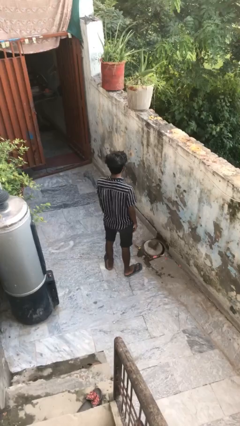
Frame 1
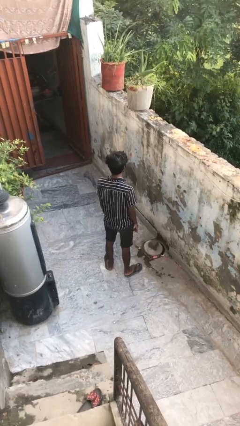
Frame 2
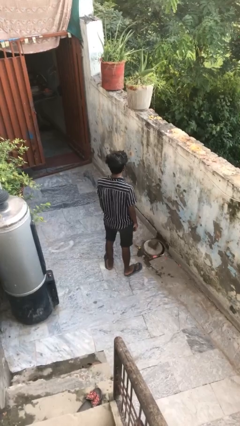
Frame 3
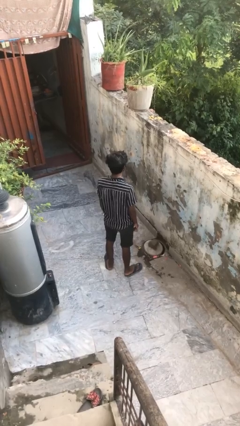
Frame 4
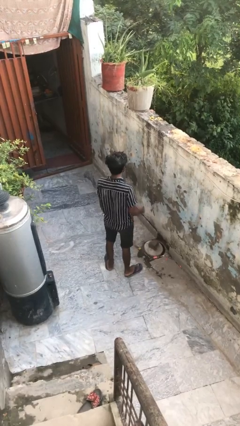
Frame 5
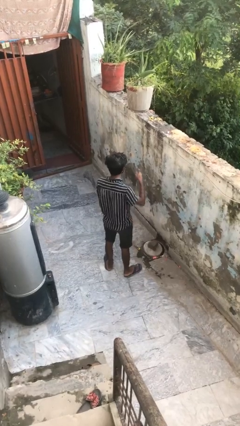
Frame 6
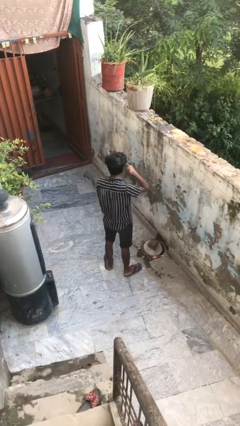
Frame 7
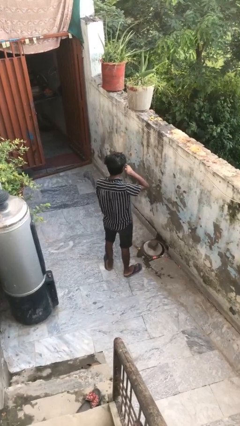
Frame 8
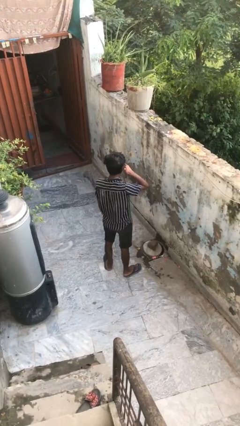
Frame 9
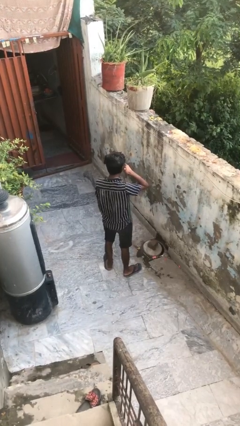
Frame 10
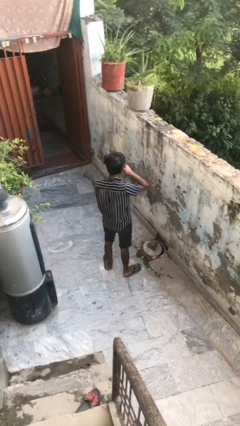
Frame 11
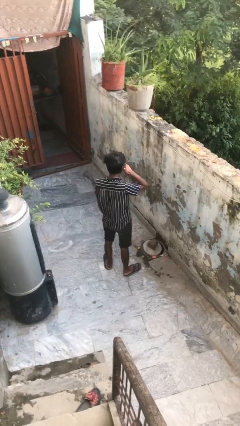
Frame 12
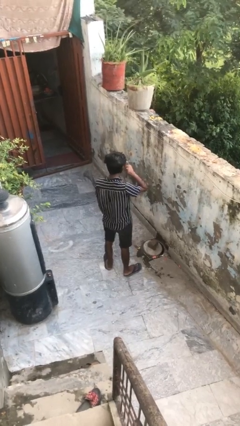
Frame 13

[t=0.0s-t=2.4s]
person gestures call me

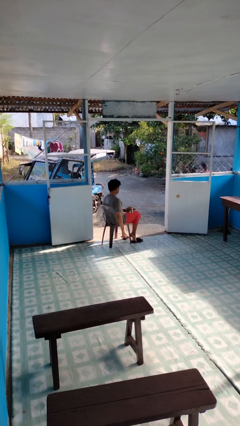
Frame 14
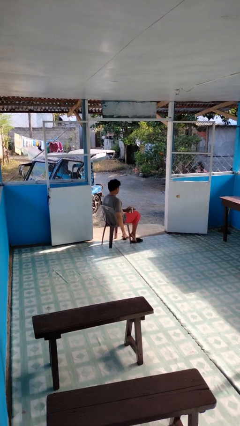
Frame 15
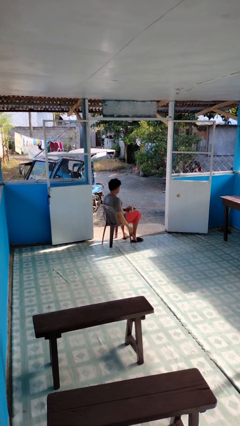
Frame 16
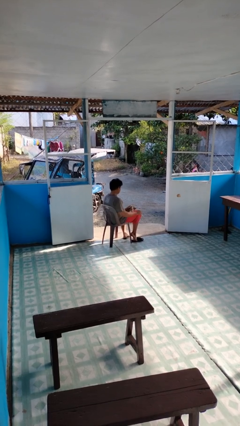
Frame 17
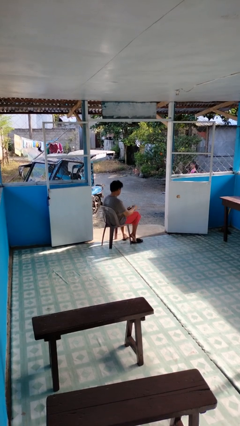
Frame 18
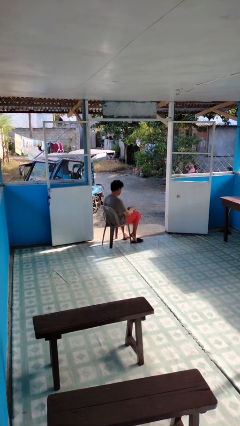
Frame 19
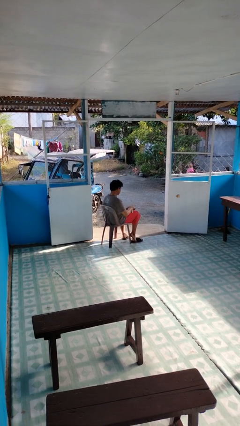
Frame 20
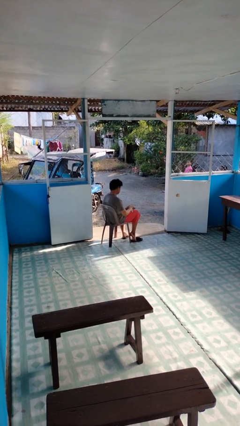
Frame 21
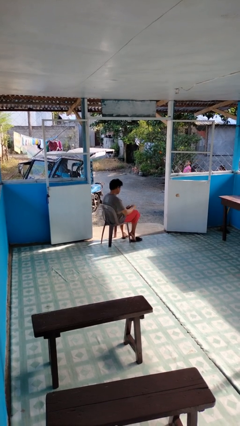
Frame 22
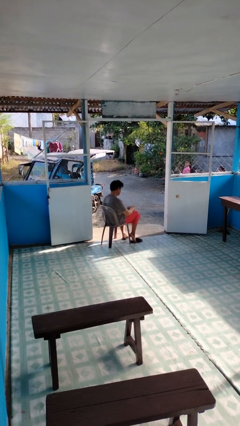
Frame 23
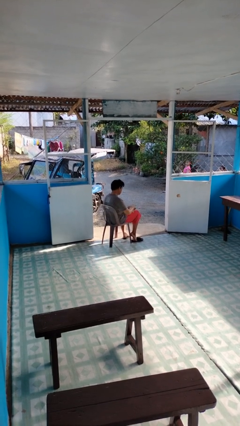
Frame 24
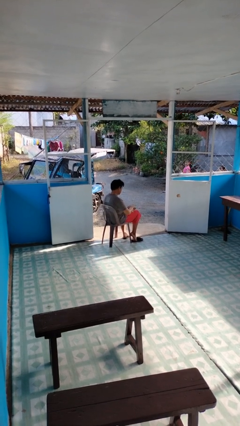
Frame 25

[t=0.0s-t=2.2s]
person pets cat

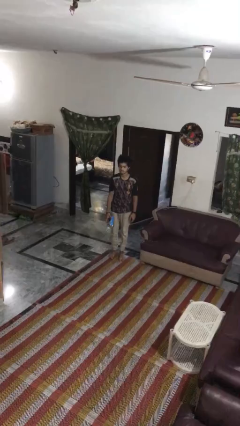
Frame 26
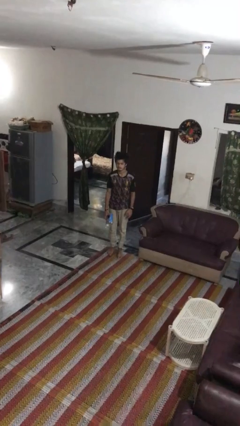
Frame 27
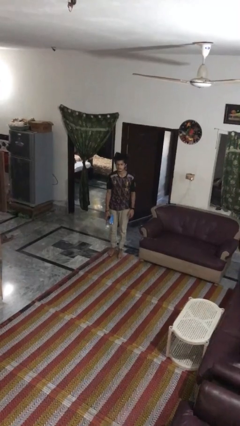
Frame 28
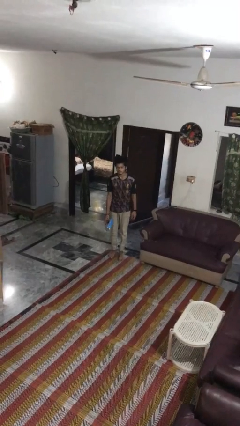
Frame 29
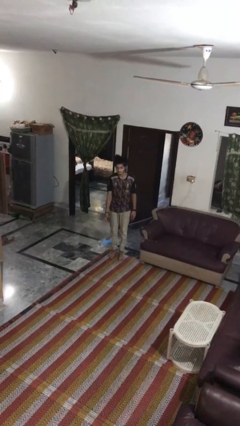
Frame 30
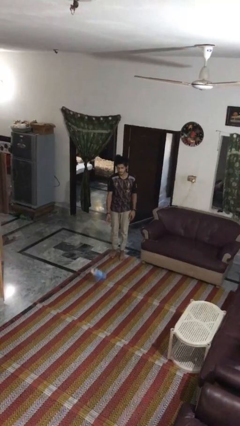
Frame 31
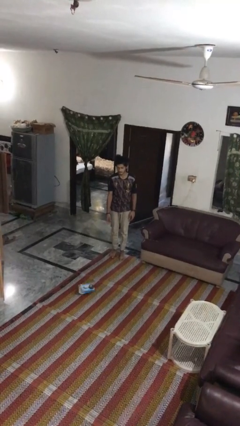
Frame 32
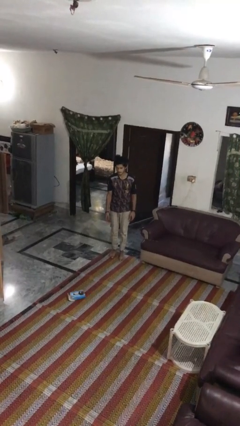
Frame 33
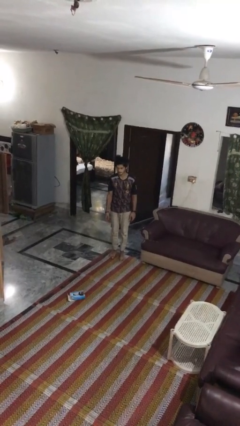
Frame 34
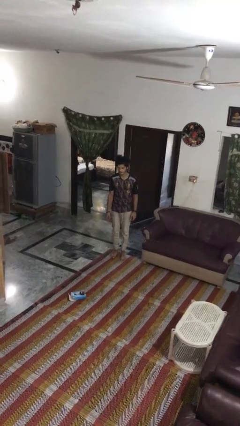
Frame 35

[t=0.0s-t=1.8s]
person throws object to ground

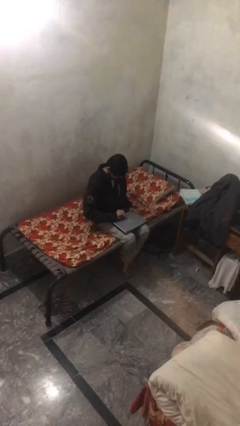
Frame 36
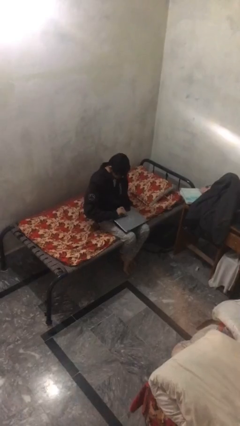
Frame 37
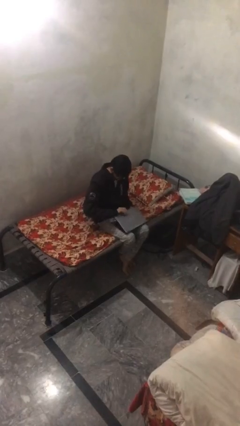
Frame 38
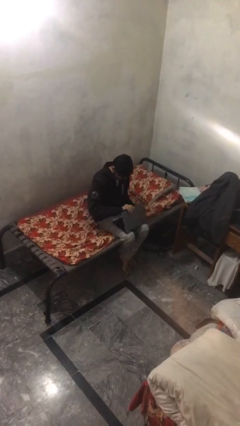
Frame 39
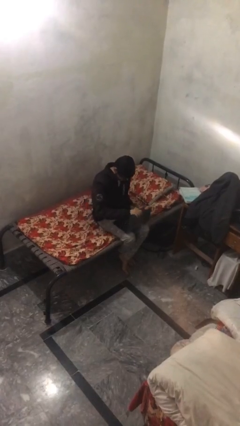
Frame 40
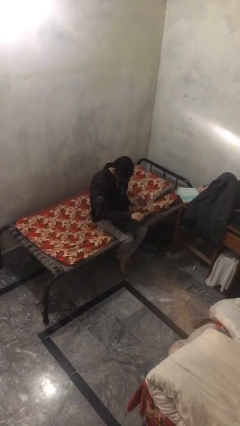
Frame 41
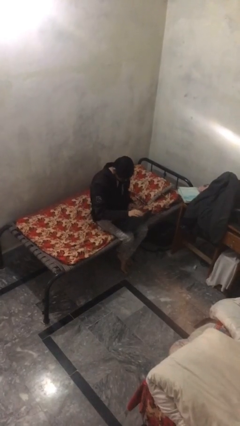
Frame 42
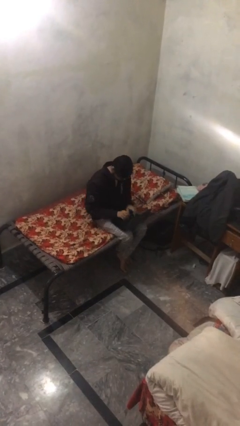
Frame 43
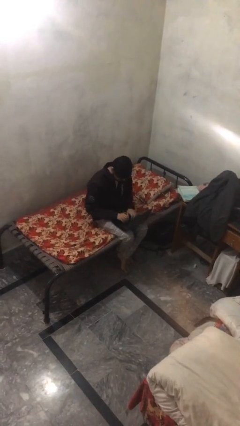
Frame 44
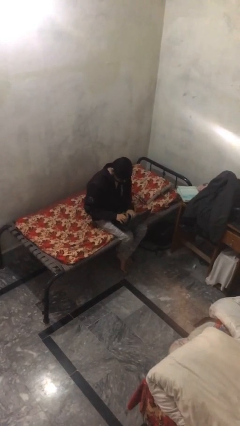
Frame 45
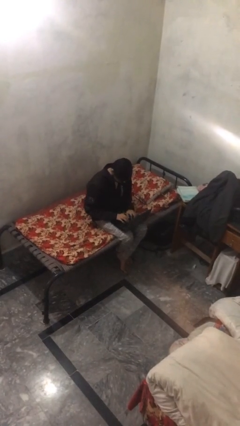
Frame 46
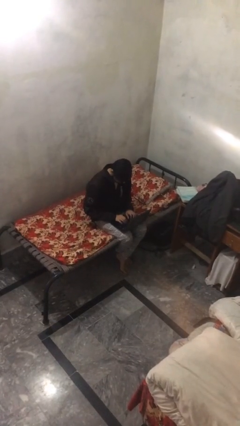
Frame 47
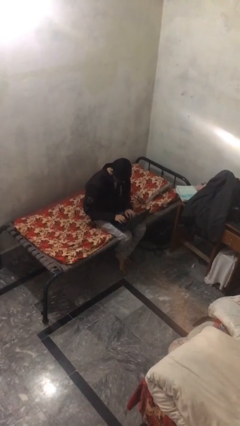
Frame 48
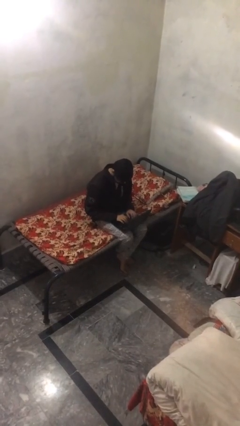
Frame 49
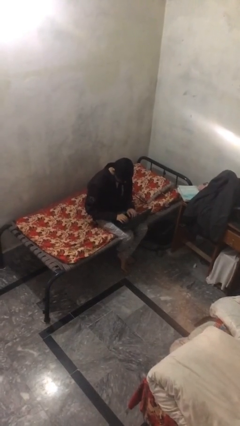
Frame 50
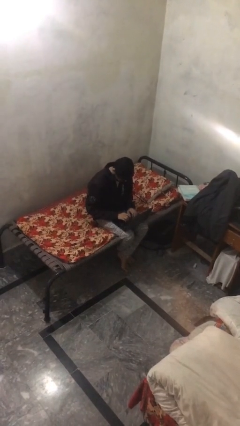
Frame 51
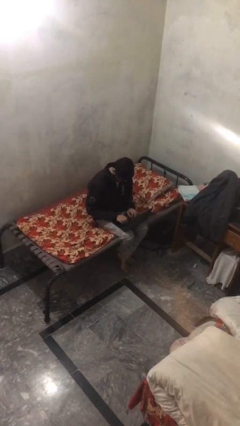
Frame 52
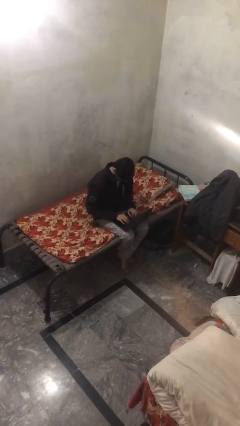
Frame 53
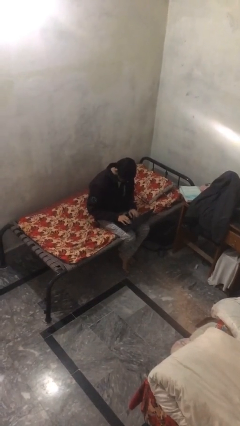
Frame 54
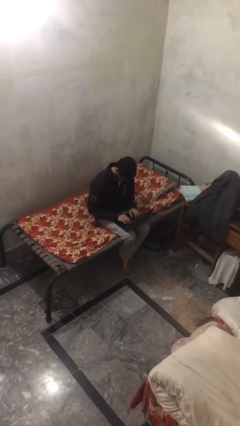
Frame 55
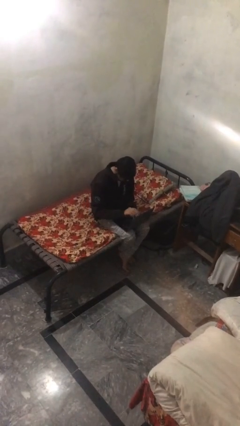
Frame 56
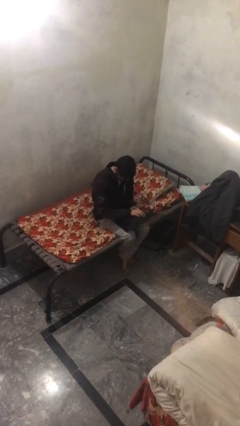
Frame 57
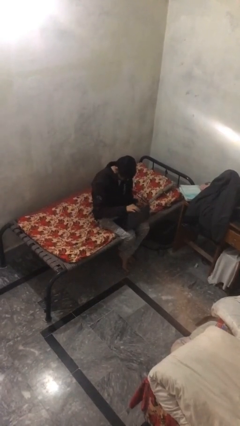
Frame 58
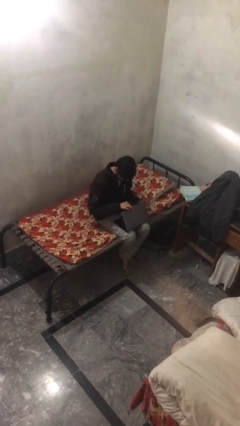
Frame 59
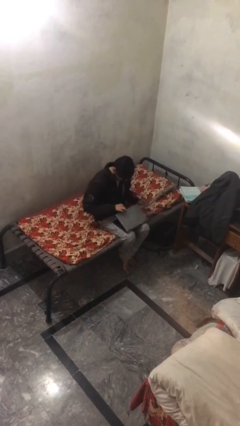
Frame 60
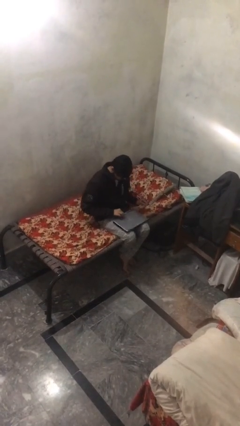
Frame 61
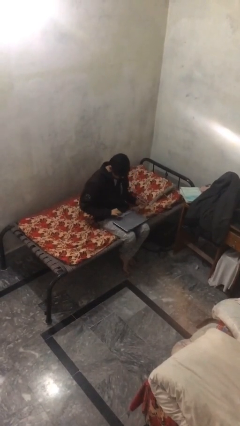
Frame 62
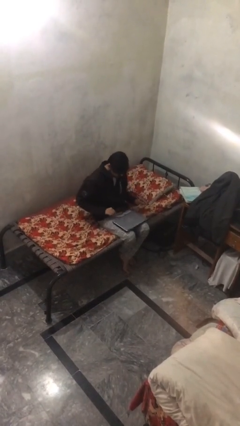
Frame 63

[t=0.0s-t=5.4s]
person interacts with laptop

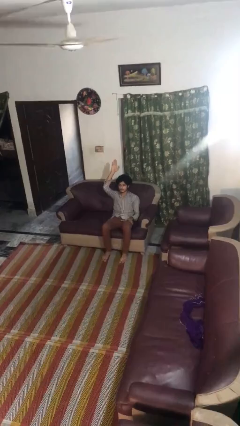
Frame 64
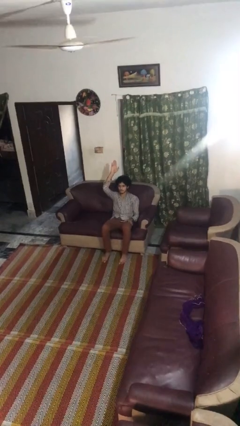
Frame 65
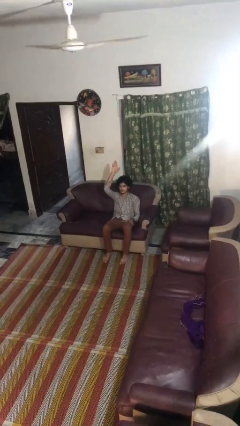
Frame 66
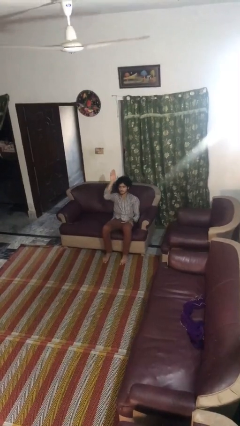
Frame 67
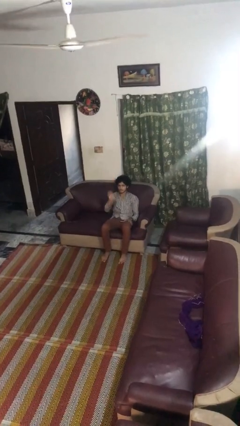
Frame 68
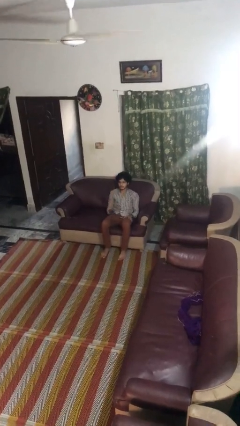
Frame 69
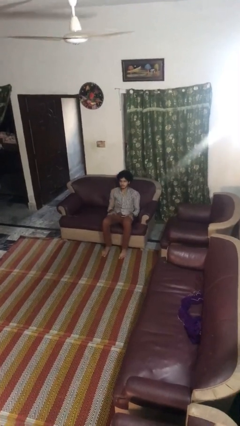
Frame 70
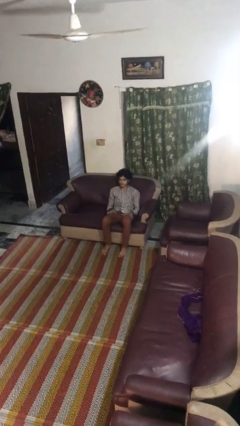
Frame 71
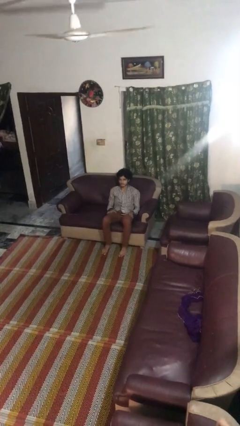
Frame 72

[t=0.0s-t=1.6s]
person gestures lower hand

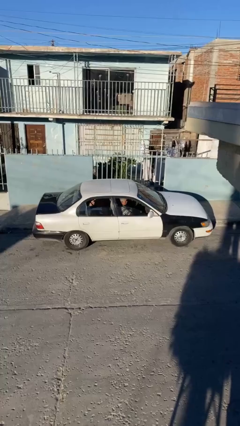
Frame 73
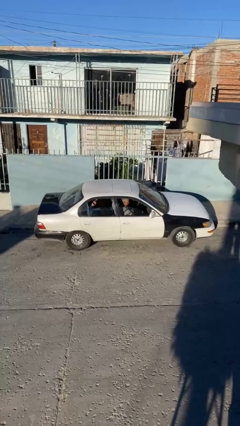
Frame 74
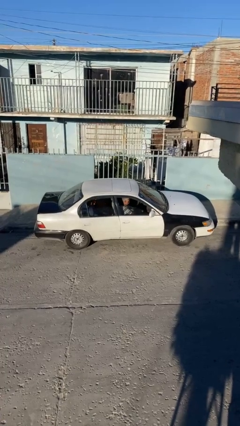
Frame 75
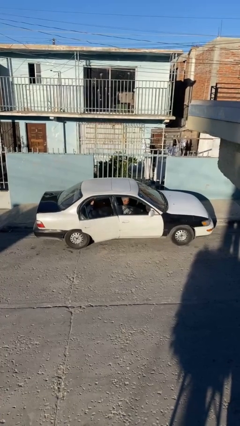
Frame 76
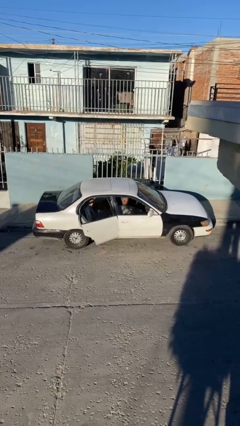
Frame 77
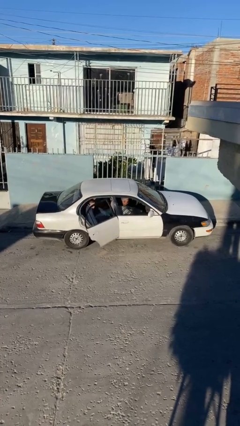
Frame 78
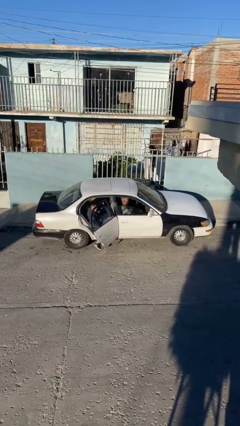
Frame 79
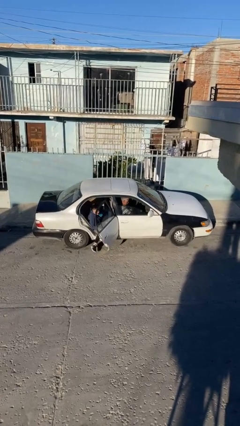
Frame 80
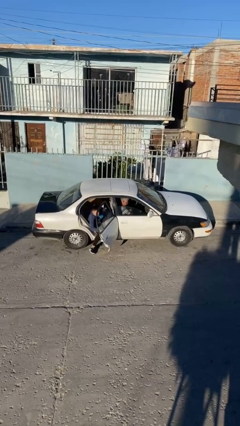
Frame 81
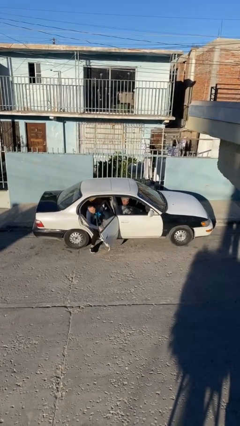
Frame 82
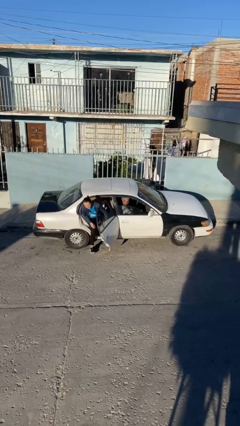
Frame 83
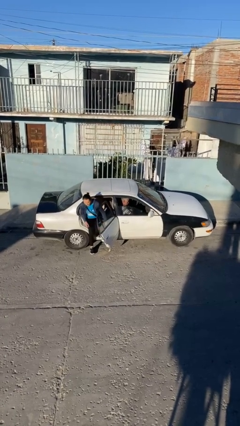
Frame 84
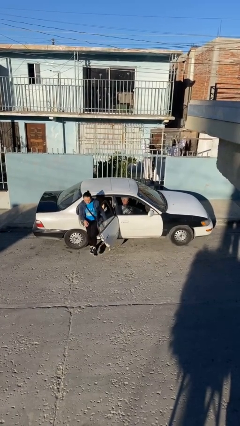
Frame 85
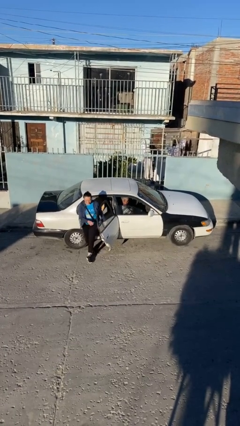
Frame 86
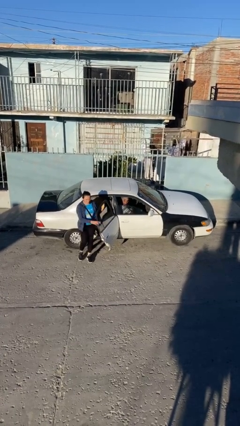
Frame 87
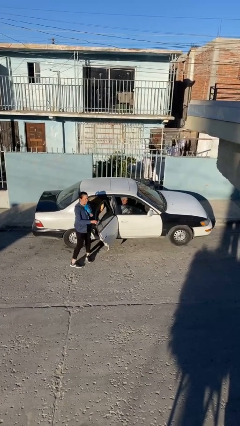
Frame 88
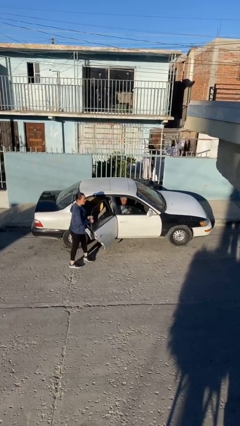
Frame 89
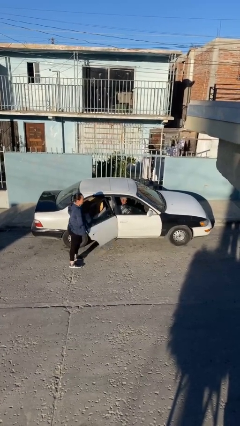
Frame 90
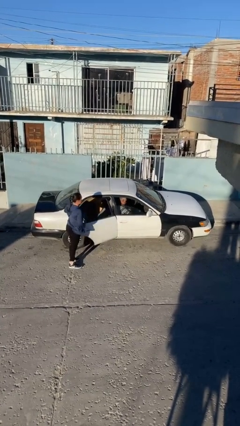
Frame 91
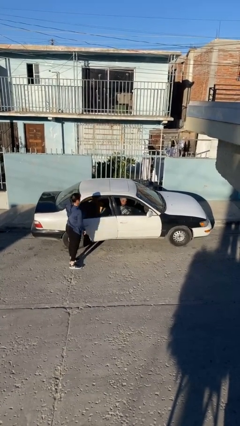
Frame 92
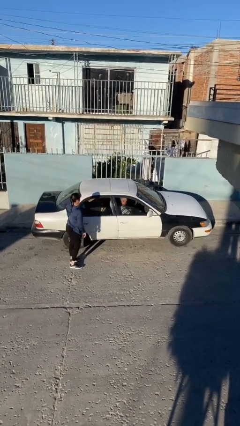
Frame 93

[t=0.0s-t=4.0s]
car drops off person

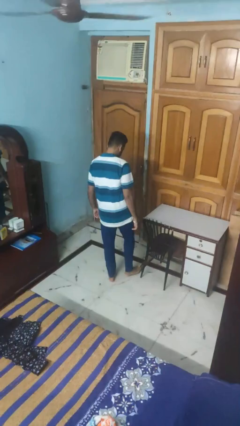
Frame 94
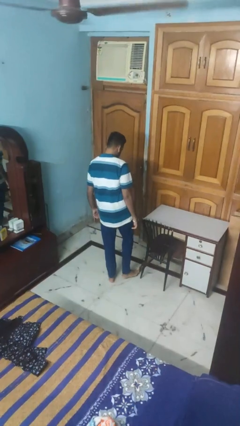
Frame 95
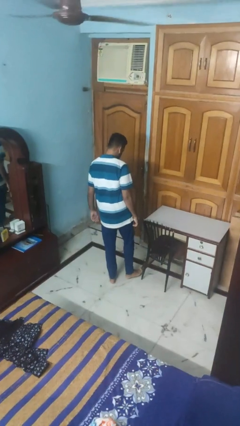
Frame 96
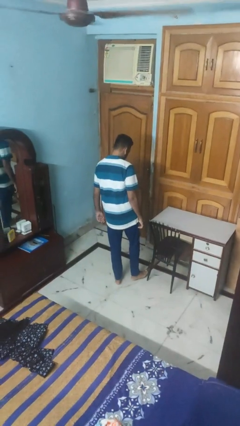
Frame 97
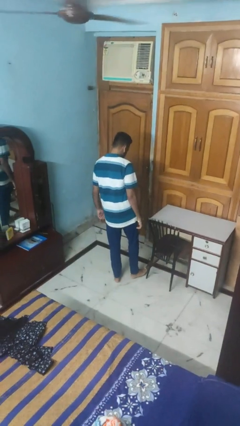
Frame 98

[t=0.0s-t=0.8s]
person stubs toe
